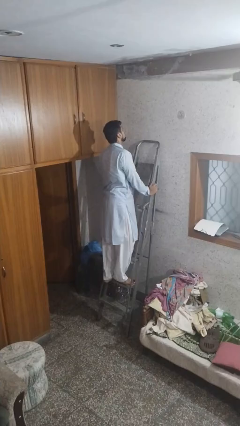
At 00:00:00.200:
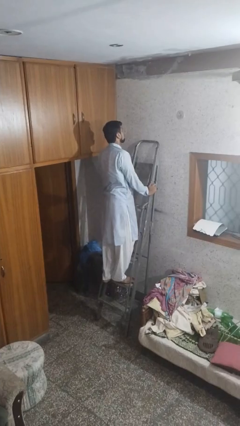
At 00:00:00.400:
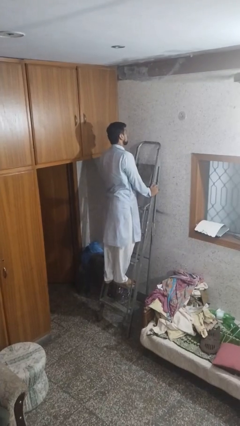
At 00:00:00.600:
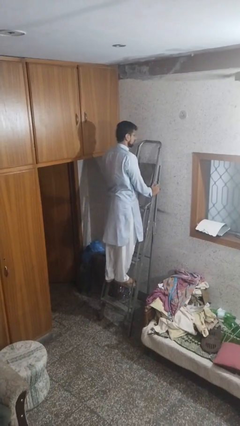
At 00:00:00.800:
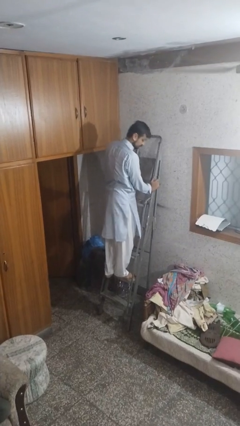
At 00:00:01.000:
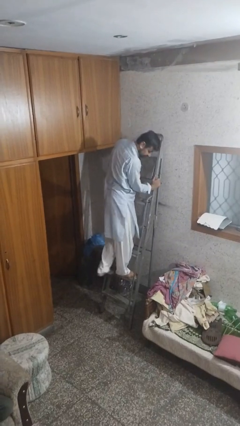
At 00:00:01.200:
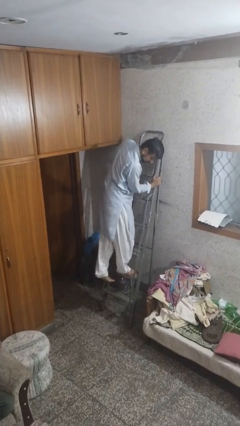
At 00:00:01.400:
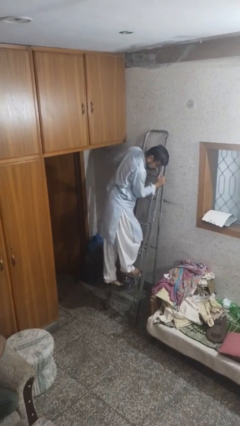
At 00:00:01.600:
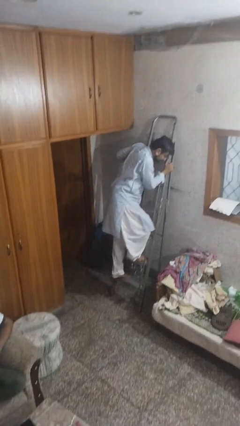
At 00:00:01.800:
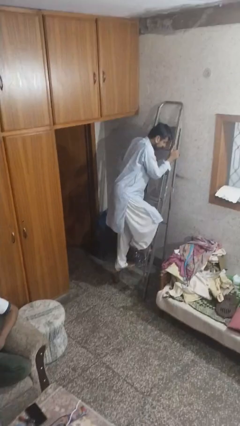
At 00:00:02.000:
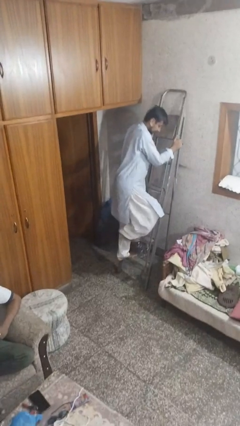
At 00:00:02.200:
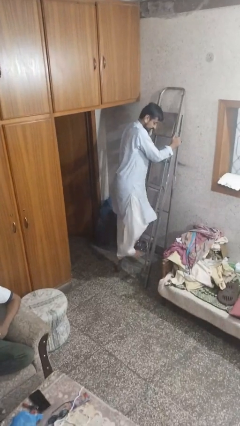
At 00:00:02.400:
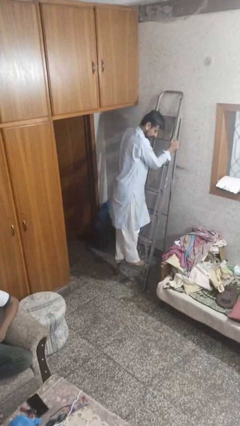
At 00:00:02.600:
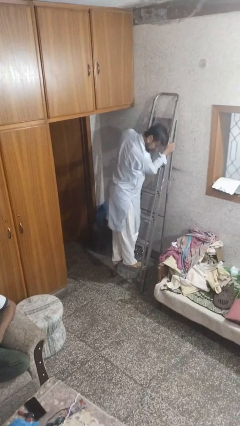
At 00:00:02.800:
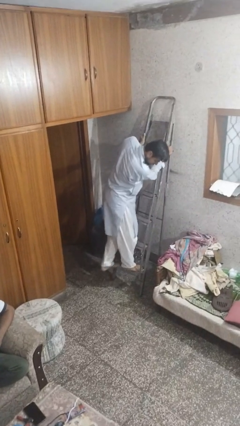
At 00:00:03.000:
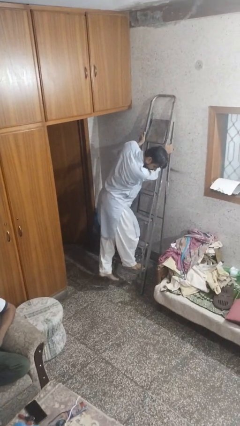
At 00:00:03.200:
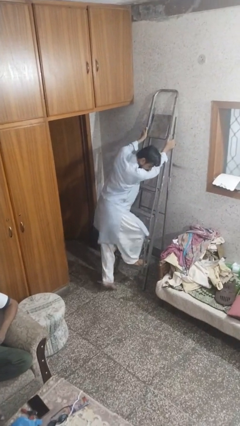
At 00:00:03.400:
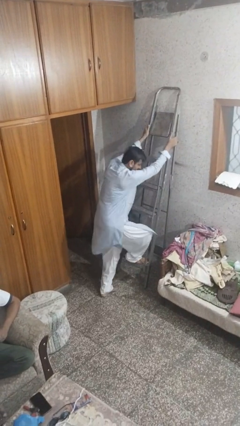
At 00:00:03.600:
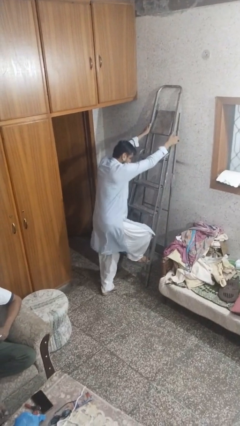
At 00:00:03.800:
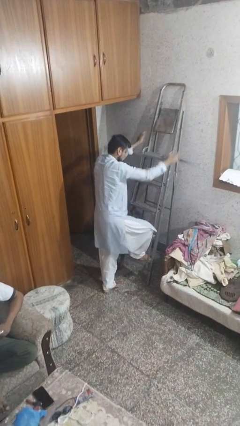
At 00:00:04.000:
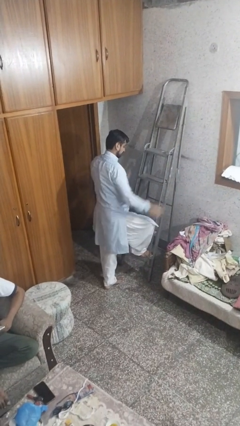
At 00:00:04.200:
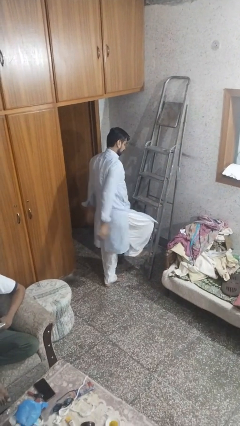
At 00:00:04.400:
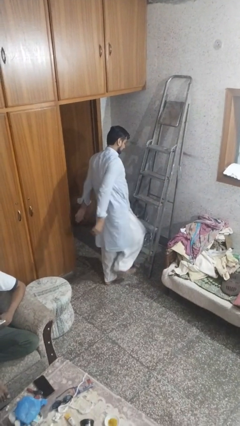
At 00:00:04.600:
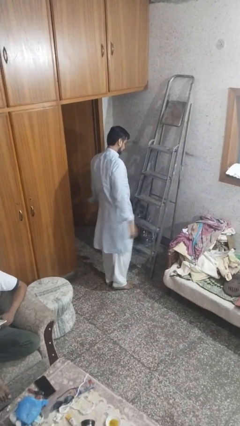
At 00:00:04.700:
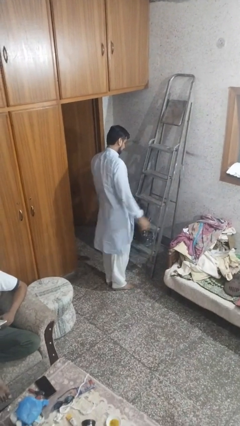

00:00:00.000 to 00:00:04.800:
person climbs down ladder

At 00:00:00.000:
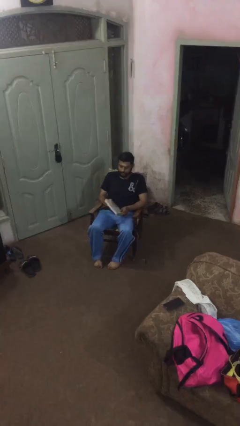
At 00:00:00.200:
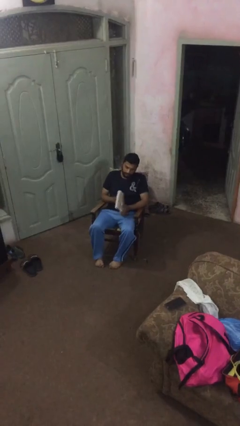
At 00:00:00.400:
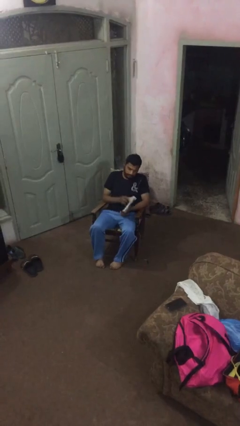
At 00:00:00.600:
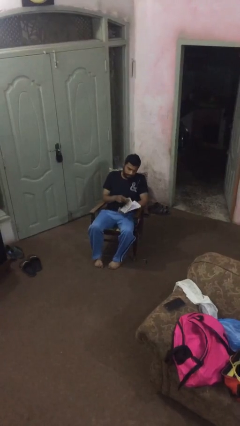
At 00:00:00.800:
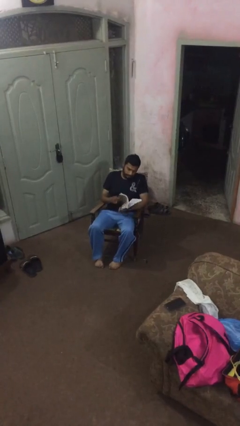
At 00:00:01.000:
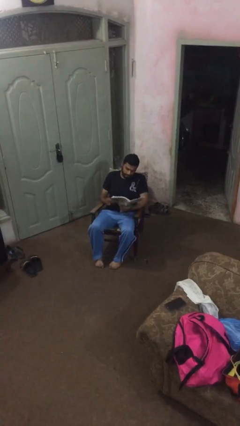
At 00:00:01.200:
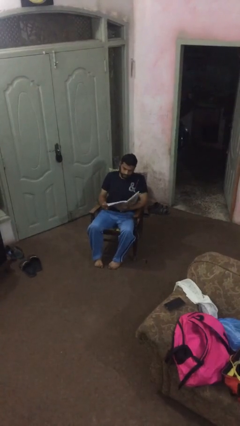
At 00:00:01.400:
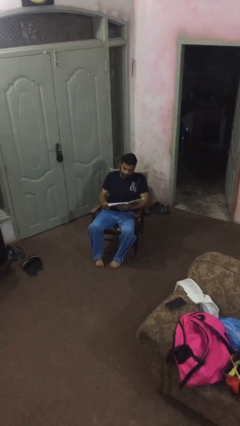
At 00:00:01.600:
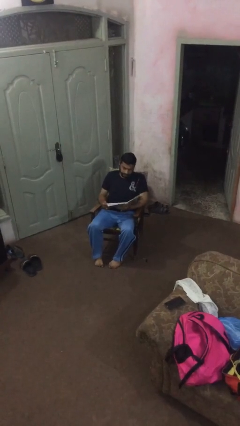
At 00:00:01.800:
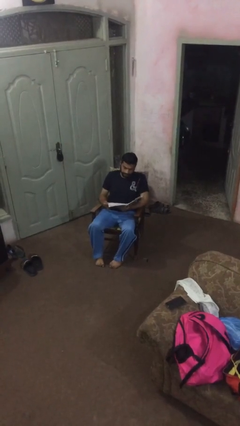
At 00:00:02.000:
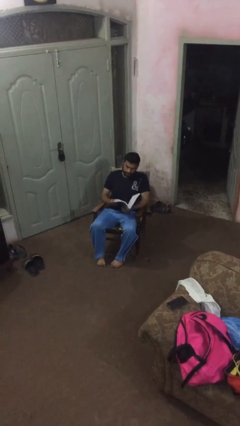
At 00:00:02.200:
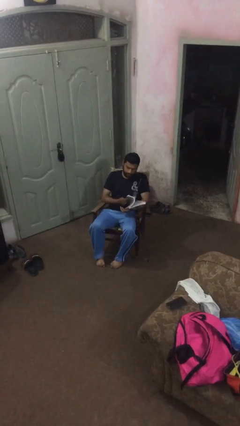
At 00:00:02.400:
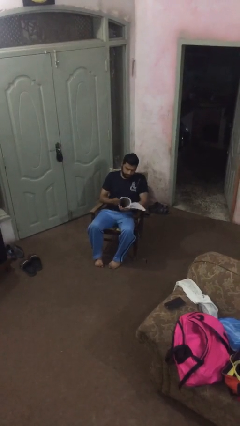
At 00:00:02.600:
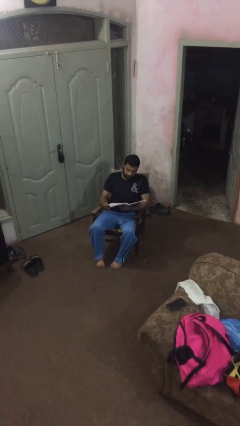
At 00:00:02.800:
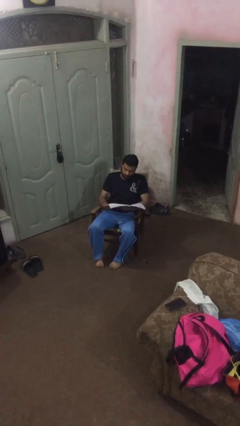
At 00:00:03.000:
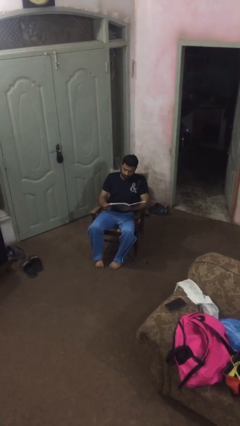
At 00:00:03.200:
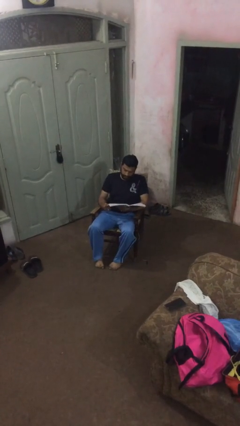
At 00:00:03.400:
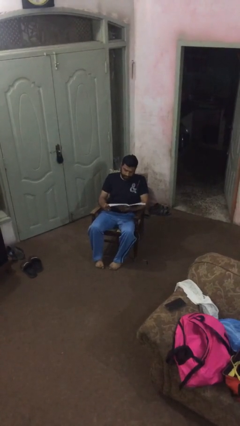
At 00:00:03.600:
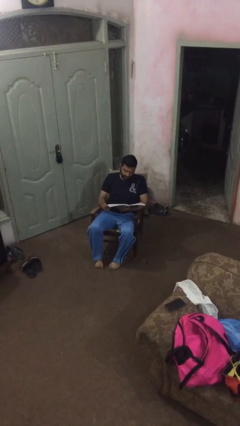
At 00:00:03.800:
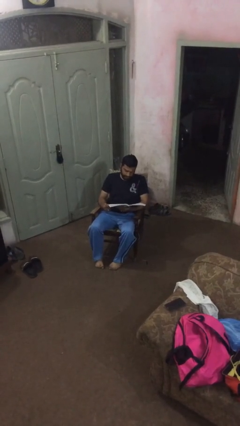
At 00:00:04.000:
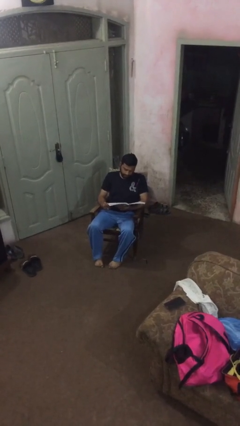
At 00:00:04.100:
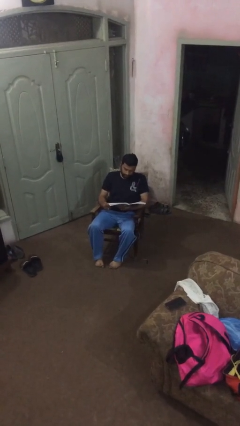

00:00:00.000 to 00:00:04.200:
person reads document

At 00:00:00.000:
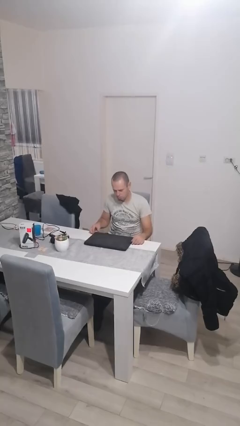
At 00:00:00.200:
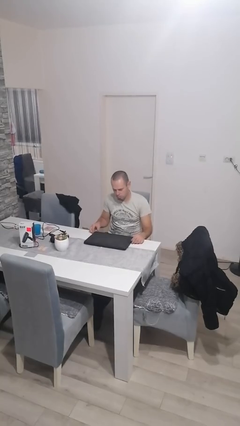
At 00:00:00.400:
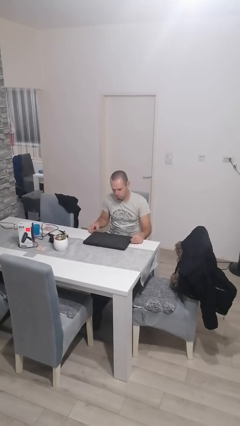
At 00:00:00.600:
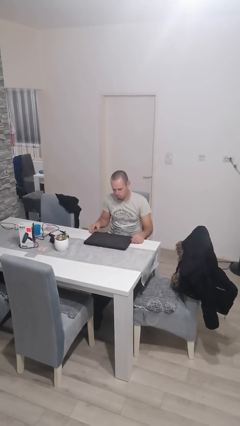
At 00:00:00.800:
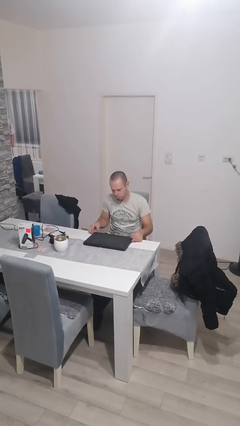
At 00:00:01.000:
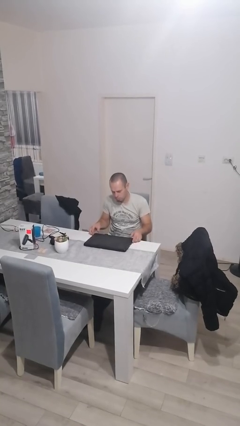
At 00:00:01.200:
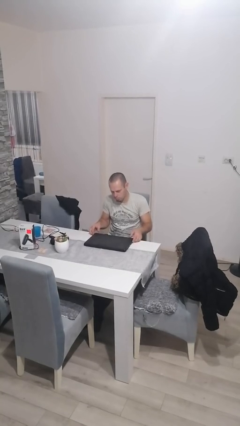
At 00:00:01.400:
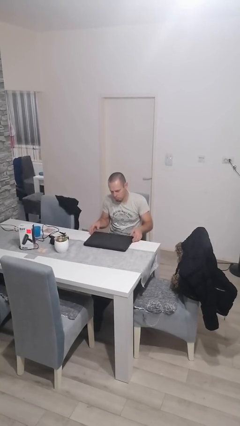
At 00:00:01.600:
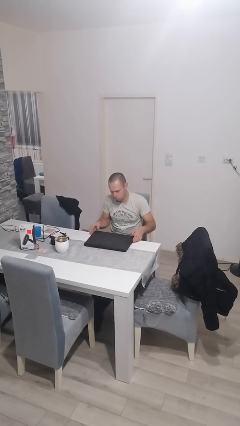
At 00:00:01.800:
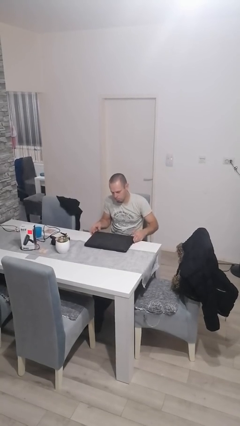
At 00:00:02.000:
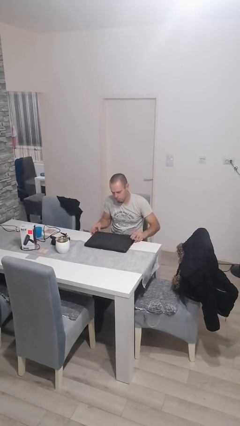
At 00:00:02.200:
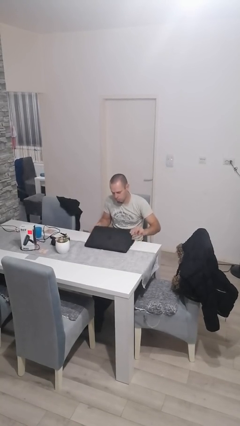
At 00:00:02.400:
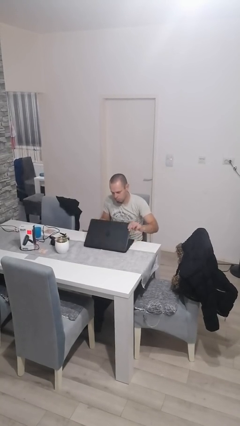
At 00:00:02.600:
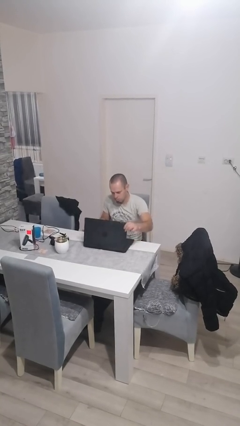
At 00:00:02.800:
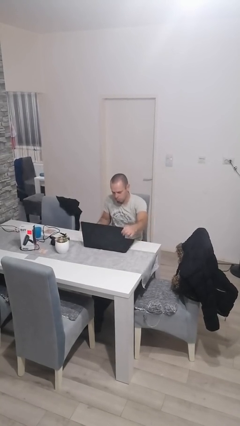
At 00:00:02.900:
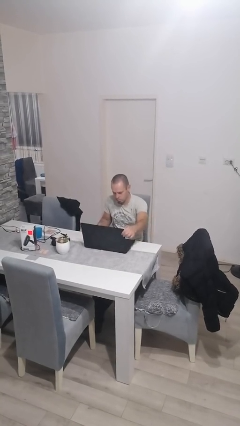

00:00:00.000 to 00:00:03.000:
person opens laptop

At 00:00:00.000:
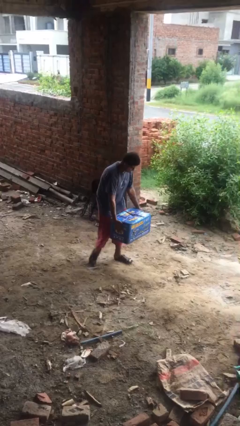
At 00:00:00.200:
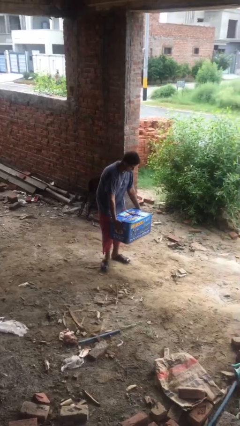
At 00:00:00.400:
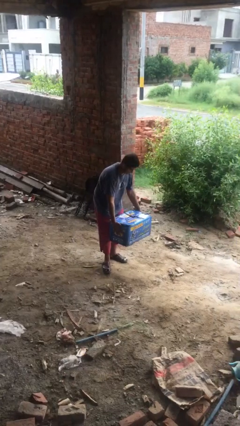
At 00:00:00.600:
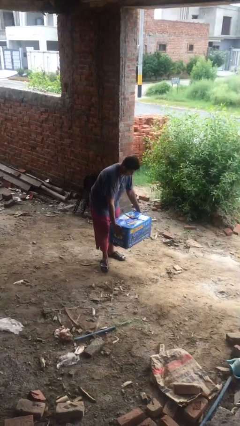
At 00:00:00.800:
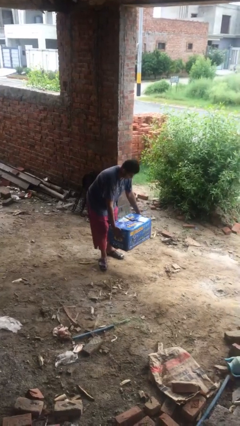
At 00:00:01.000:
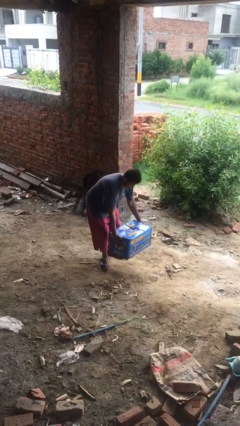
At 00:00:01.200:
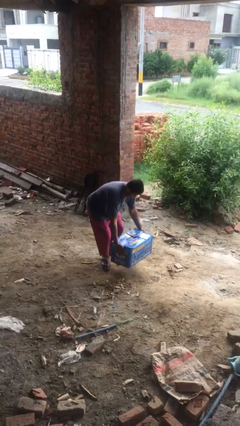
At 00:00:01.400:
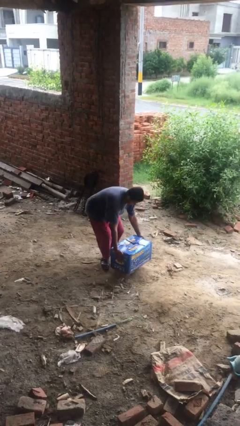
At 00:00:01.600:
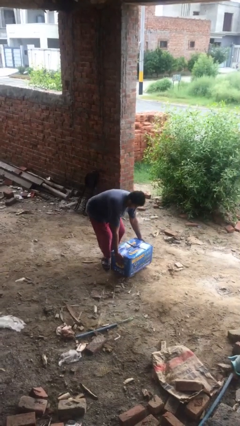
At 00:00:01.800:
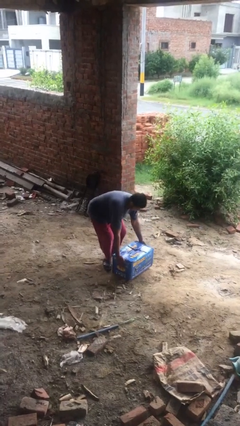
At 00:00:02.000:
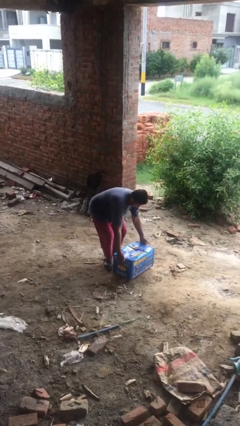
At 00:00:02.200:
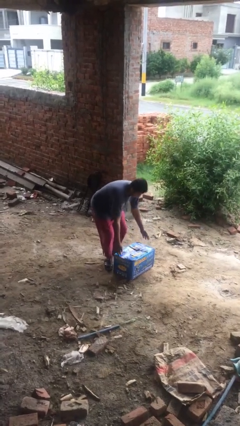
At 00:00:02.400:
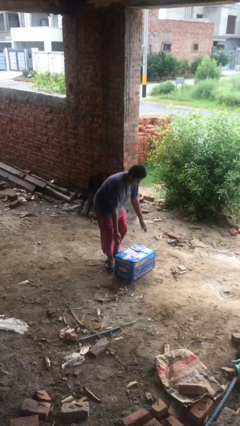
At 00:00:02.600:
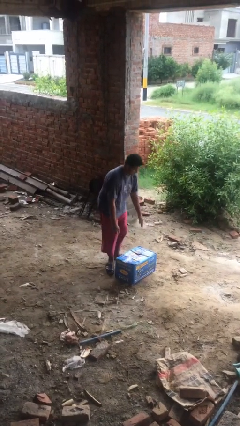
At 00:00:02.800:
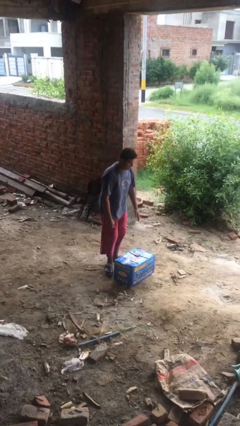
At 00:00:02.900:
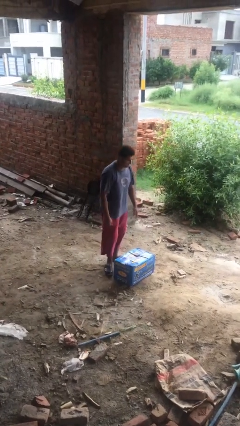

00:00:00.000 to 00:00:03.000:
person puts down object on floor

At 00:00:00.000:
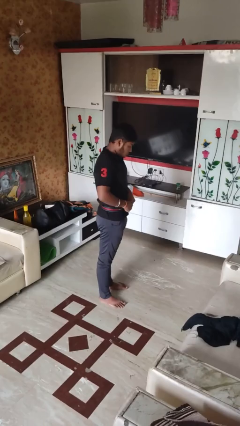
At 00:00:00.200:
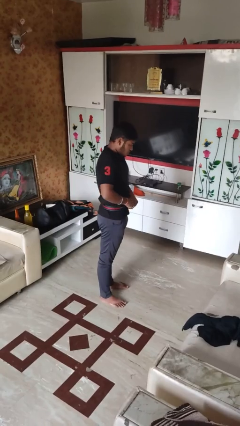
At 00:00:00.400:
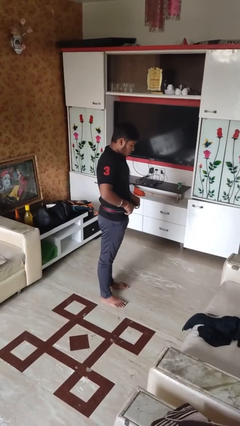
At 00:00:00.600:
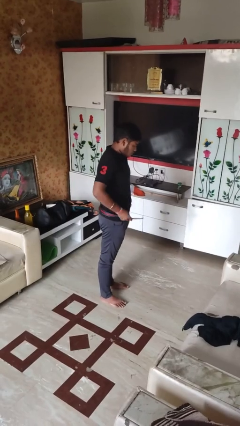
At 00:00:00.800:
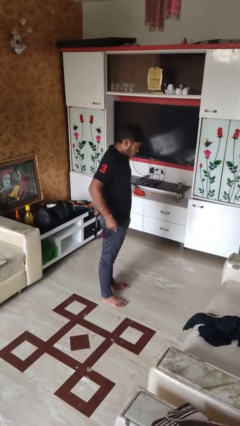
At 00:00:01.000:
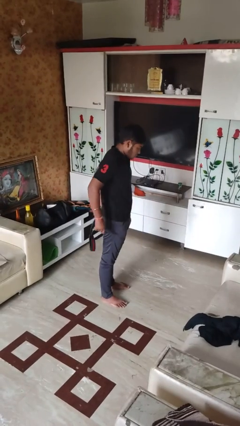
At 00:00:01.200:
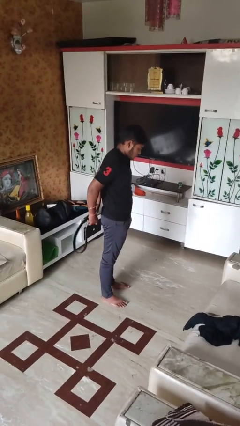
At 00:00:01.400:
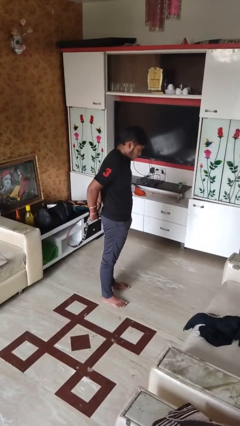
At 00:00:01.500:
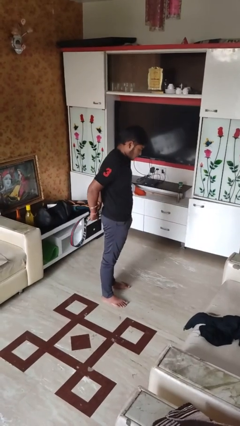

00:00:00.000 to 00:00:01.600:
person takes off belt

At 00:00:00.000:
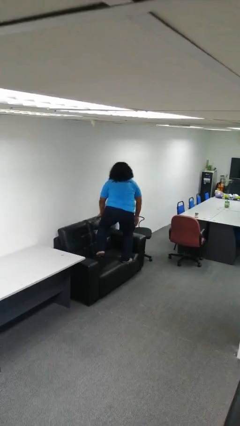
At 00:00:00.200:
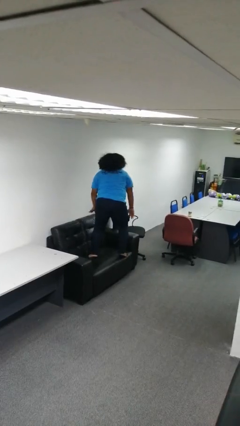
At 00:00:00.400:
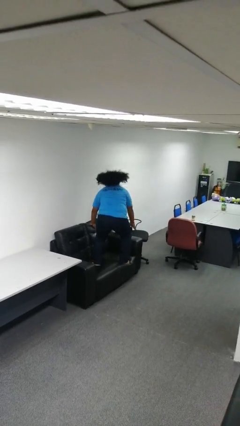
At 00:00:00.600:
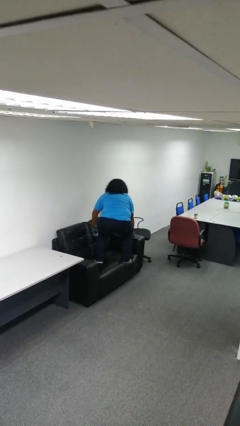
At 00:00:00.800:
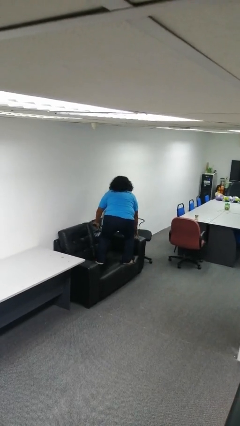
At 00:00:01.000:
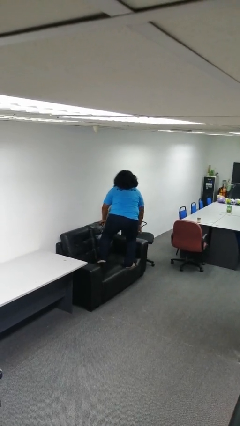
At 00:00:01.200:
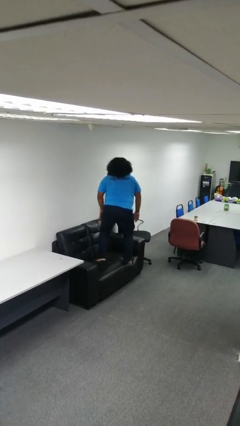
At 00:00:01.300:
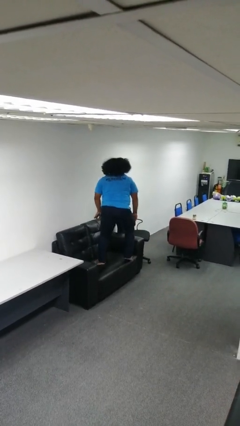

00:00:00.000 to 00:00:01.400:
person jumps on couch
